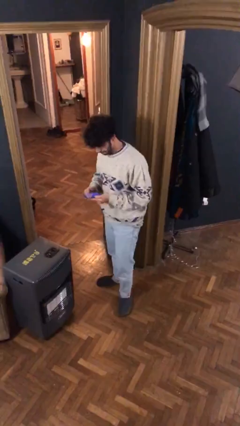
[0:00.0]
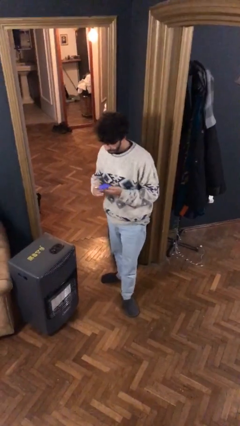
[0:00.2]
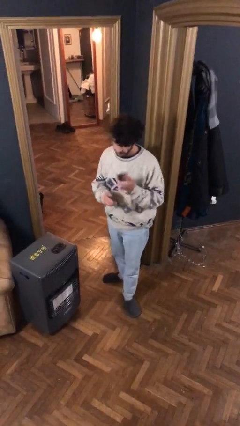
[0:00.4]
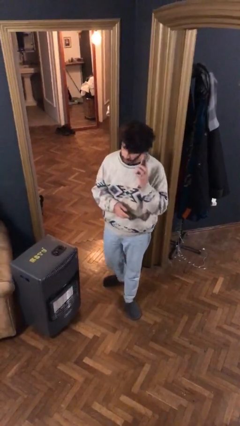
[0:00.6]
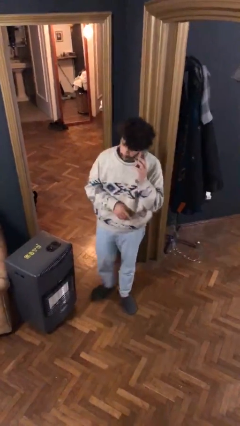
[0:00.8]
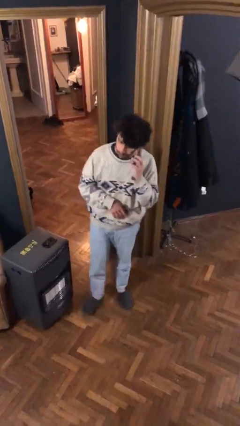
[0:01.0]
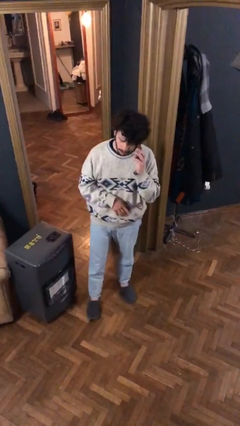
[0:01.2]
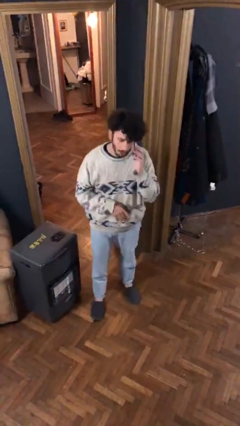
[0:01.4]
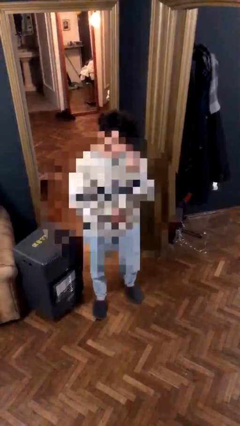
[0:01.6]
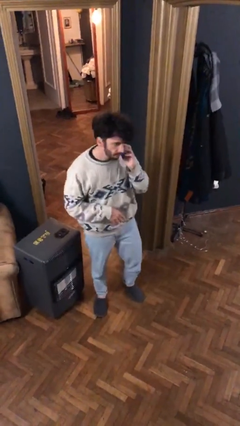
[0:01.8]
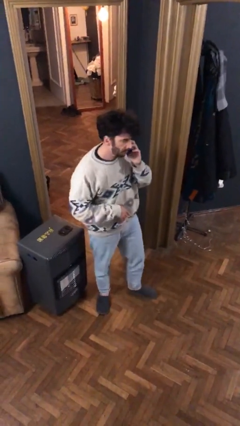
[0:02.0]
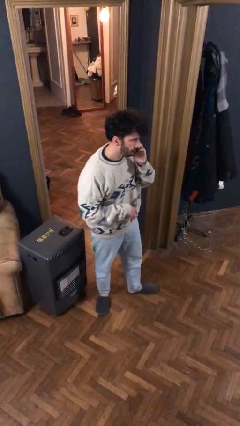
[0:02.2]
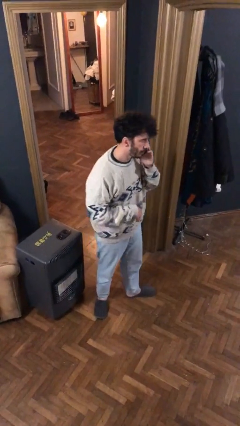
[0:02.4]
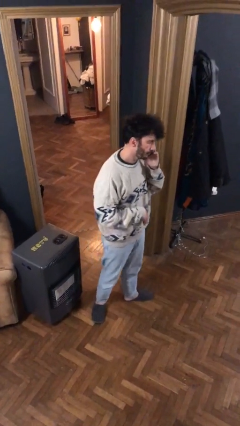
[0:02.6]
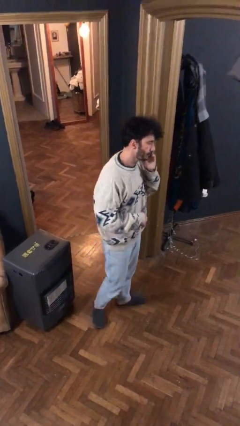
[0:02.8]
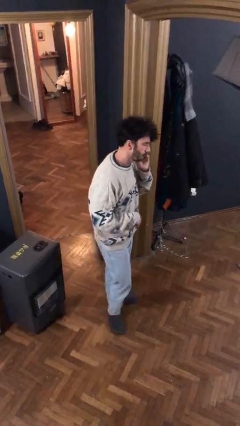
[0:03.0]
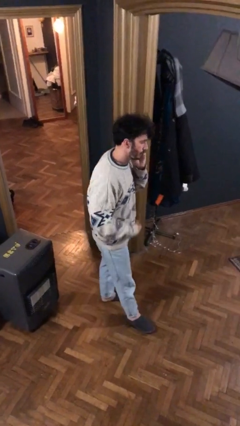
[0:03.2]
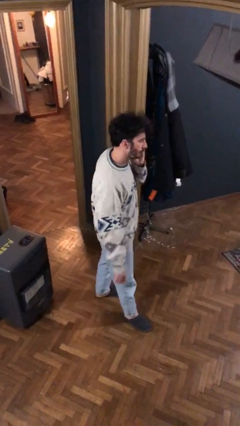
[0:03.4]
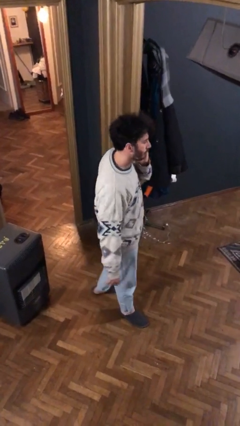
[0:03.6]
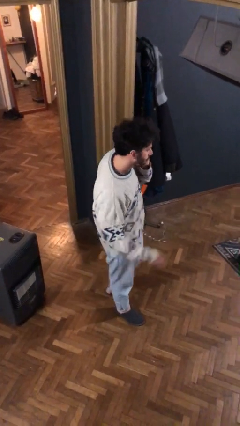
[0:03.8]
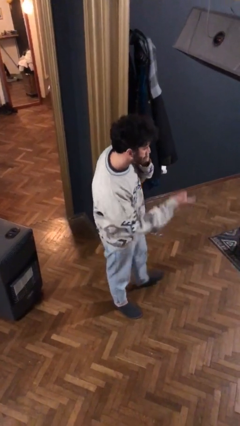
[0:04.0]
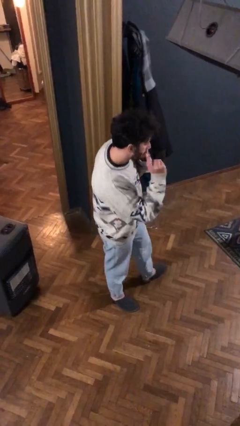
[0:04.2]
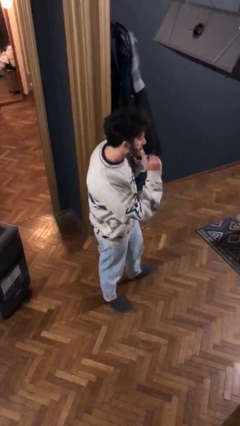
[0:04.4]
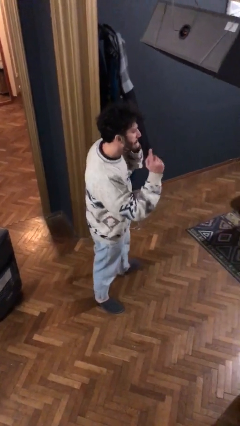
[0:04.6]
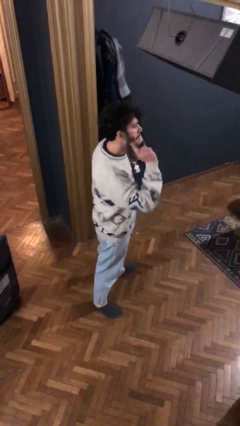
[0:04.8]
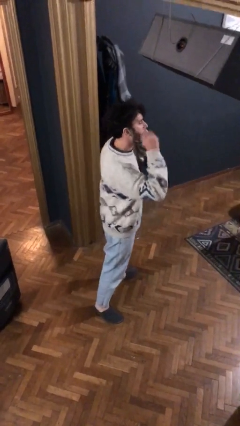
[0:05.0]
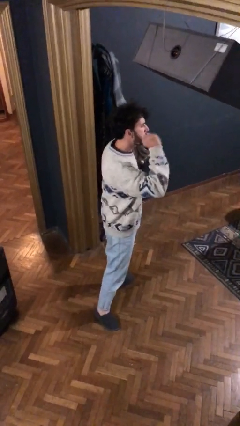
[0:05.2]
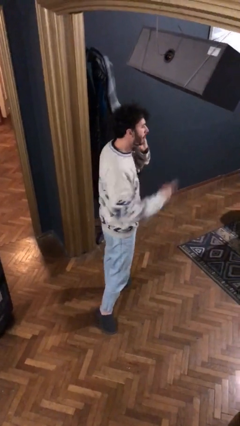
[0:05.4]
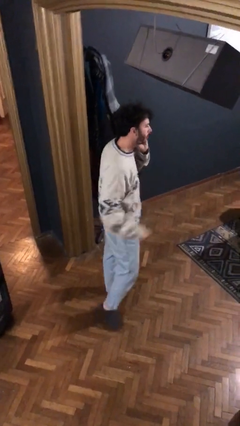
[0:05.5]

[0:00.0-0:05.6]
person talks on phone

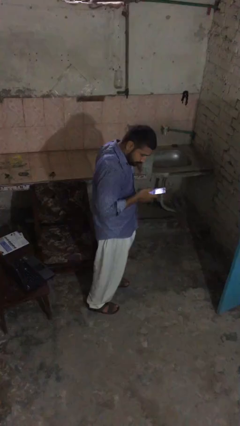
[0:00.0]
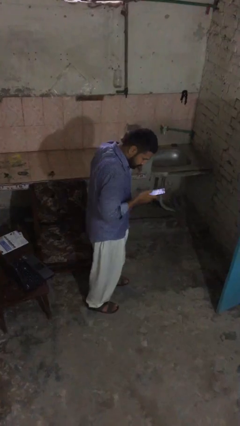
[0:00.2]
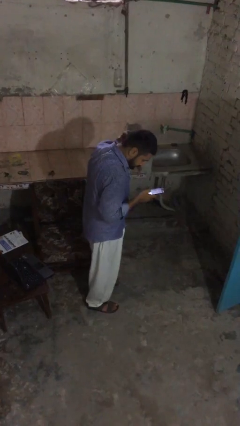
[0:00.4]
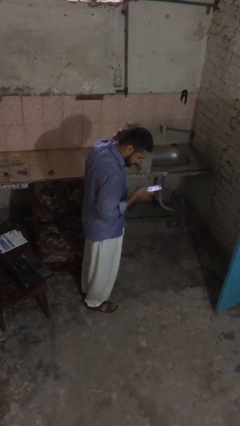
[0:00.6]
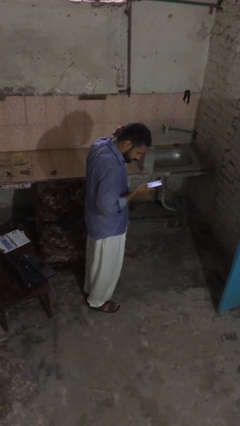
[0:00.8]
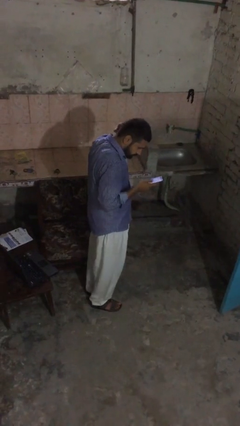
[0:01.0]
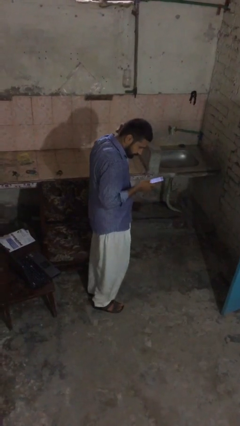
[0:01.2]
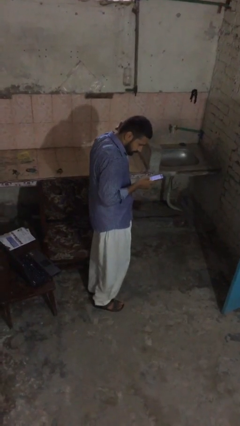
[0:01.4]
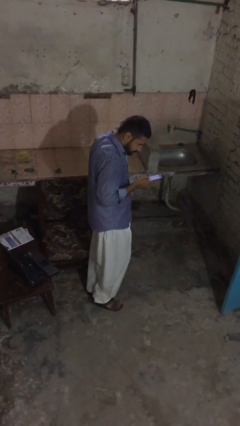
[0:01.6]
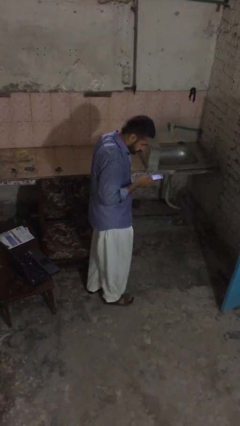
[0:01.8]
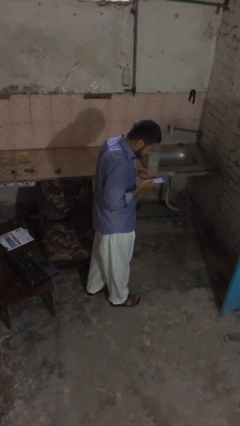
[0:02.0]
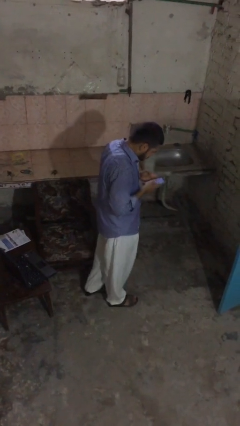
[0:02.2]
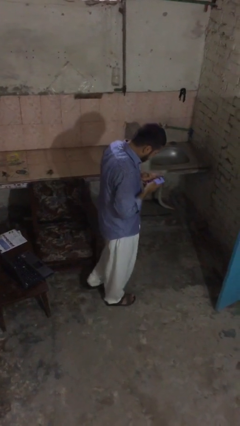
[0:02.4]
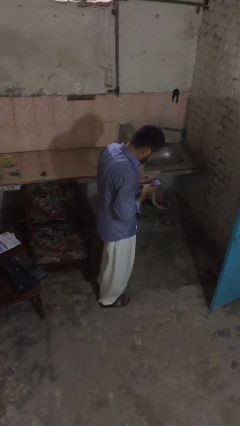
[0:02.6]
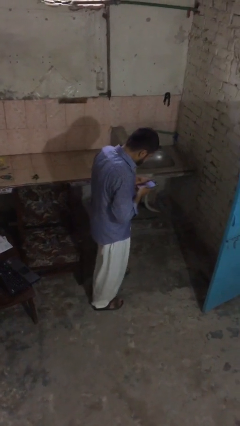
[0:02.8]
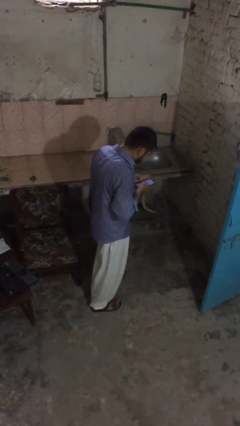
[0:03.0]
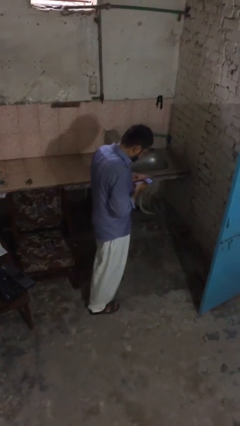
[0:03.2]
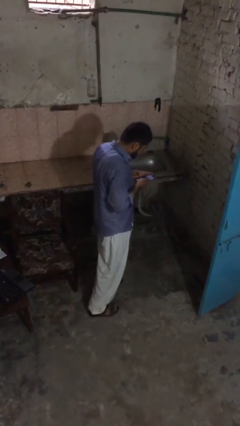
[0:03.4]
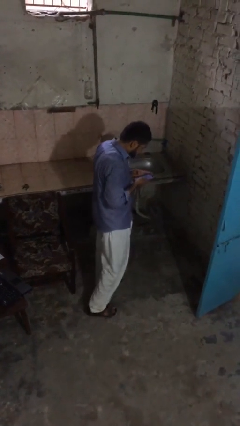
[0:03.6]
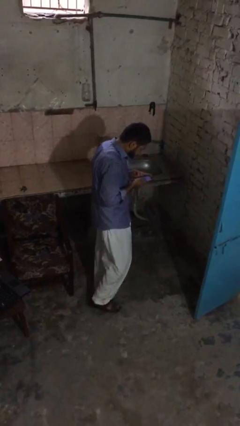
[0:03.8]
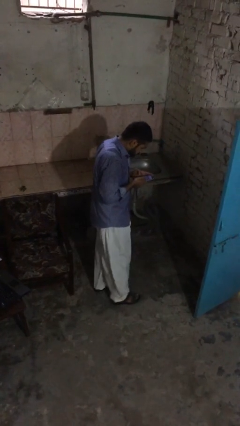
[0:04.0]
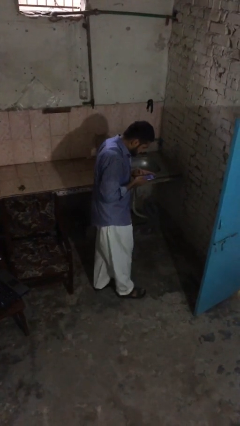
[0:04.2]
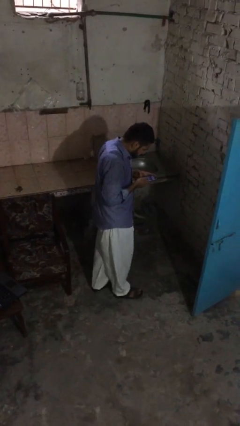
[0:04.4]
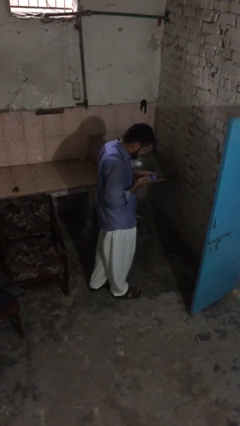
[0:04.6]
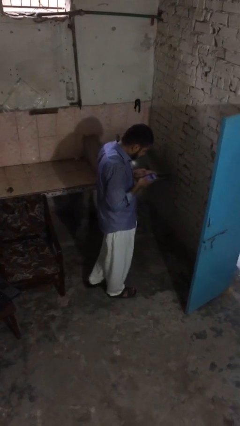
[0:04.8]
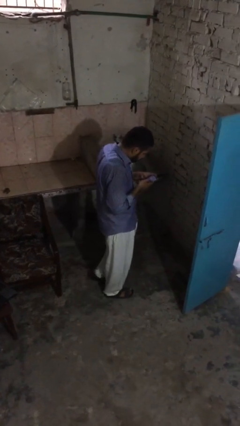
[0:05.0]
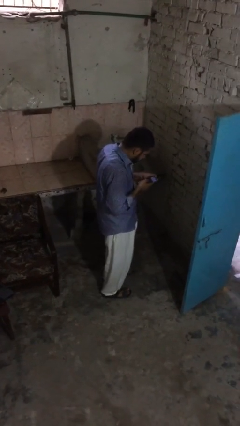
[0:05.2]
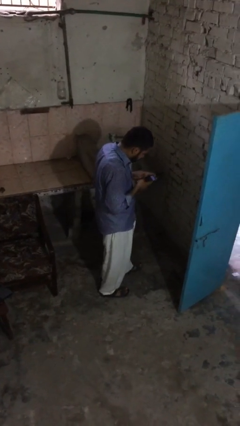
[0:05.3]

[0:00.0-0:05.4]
person texts on phone

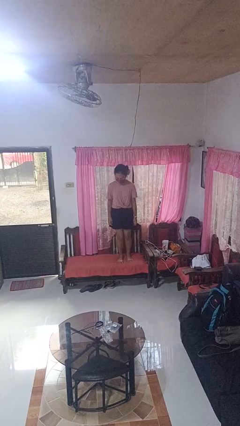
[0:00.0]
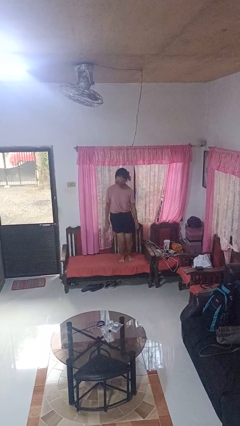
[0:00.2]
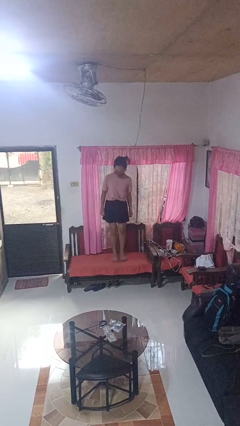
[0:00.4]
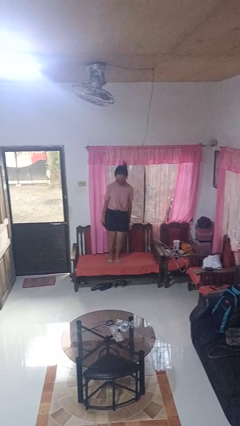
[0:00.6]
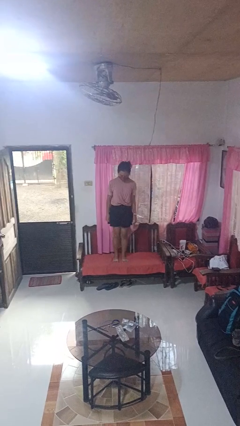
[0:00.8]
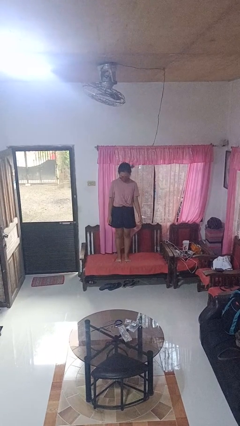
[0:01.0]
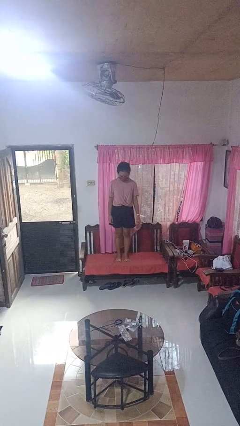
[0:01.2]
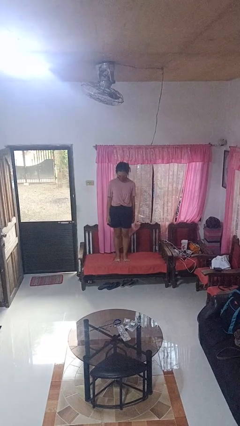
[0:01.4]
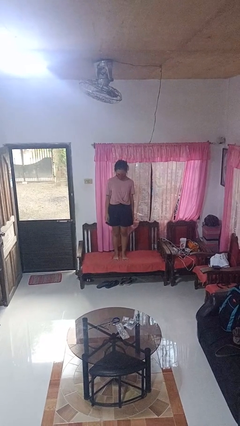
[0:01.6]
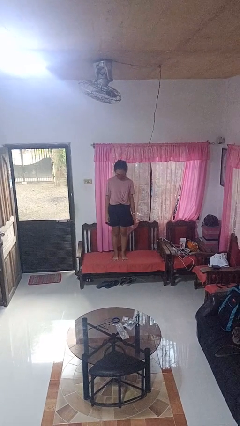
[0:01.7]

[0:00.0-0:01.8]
person jumps on couch

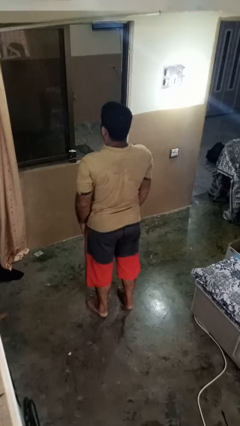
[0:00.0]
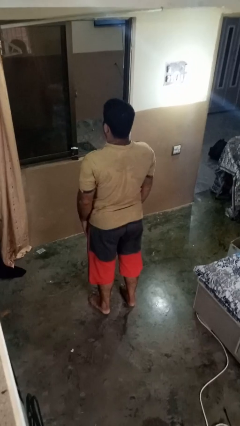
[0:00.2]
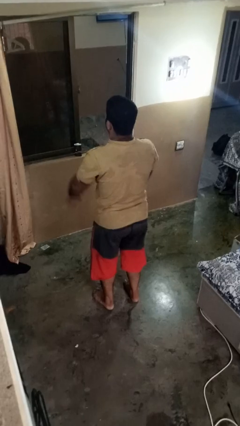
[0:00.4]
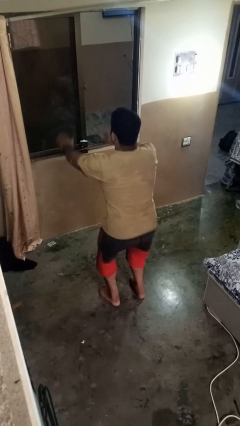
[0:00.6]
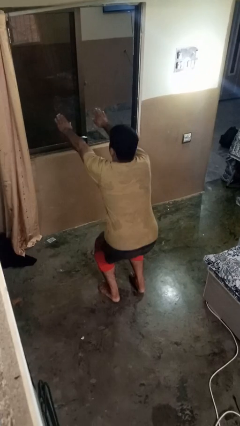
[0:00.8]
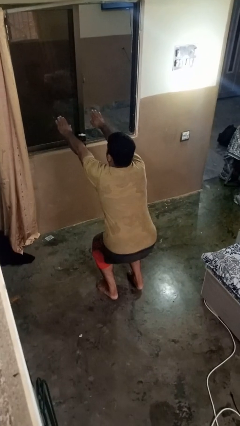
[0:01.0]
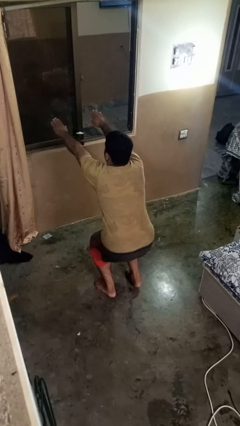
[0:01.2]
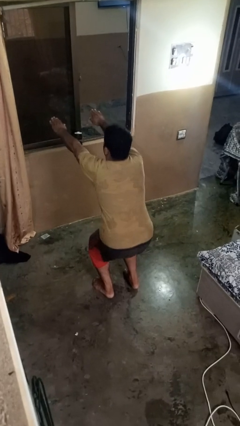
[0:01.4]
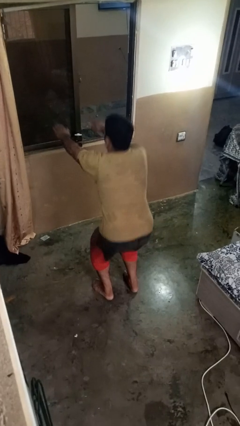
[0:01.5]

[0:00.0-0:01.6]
person squats

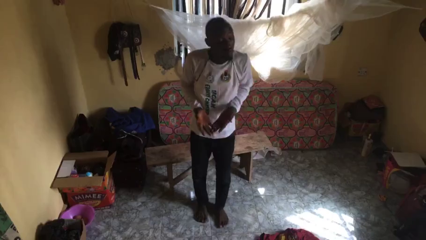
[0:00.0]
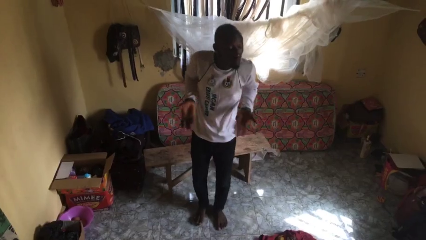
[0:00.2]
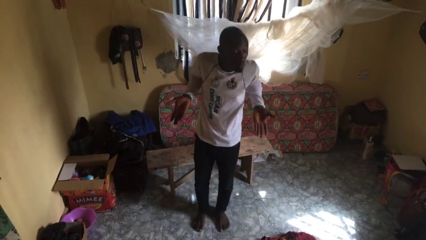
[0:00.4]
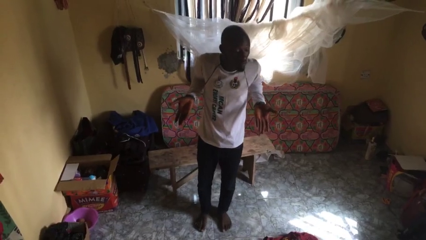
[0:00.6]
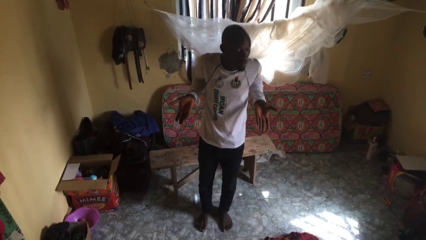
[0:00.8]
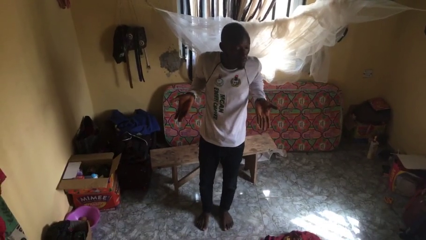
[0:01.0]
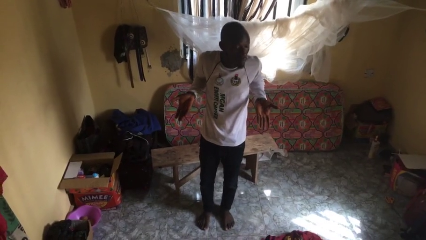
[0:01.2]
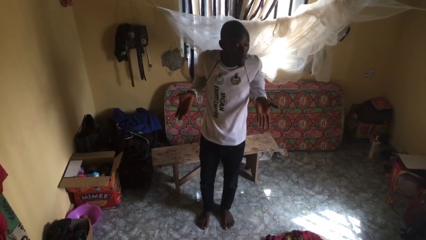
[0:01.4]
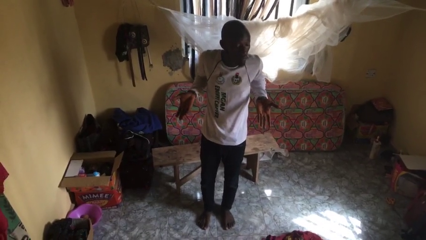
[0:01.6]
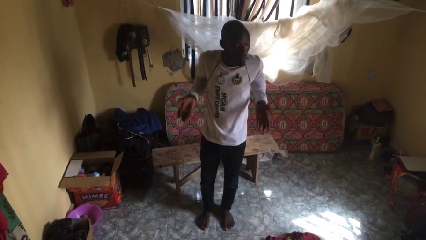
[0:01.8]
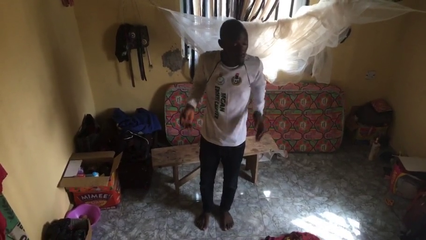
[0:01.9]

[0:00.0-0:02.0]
person shrugs

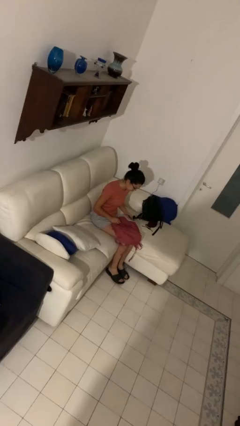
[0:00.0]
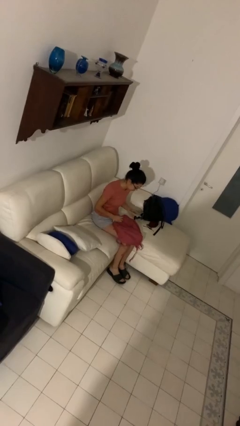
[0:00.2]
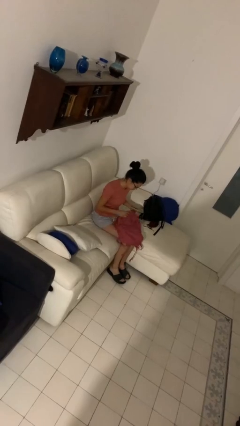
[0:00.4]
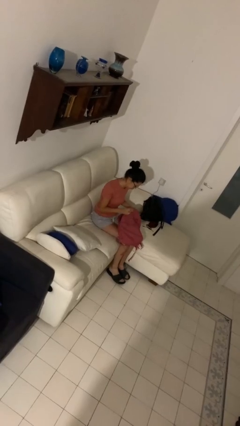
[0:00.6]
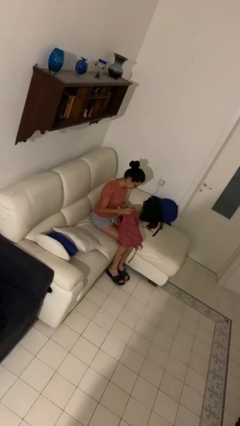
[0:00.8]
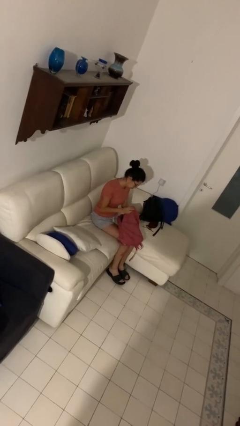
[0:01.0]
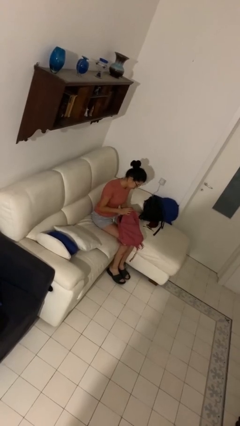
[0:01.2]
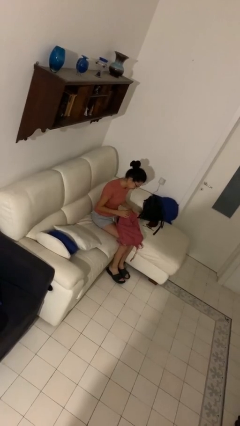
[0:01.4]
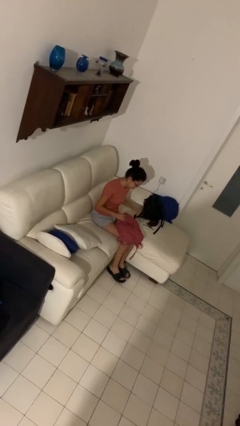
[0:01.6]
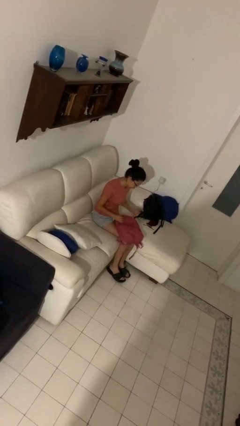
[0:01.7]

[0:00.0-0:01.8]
person puts object into purse
